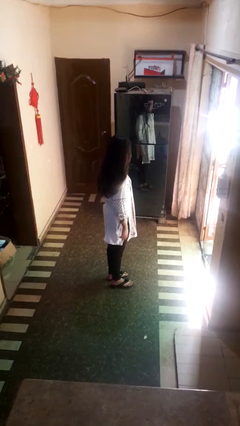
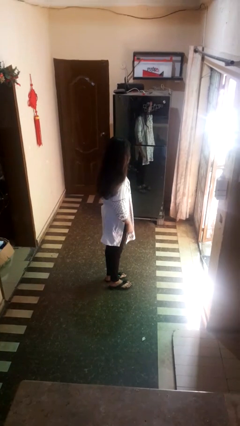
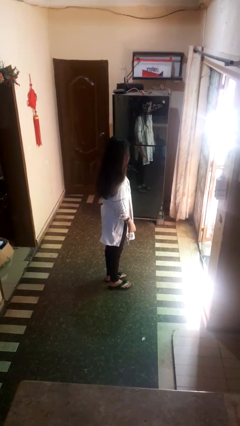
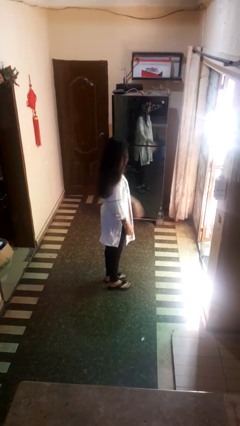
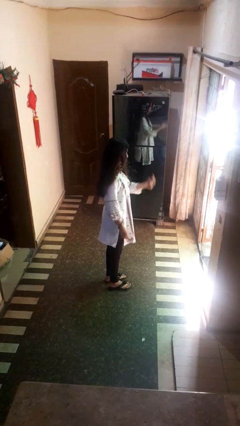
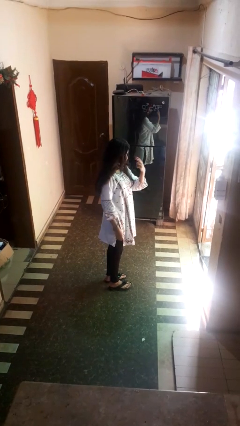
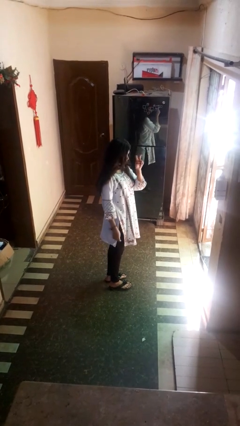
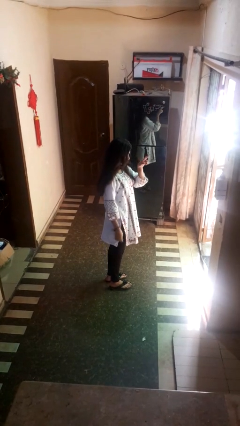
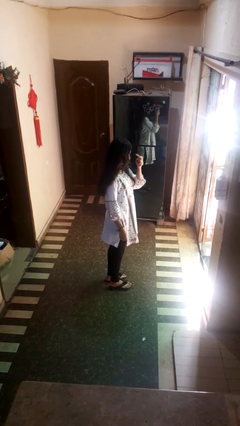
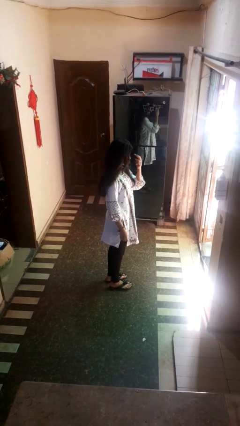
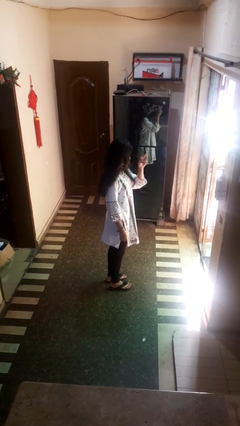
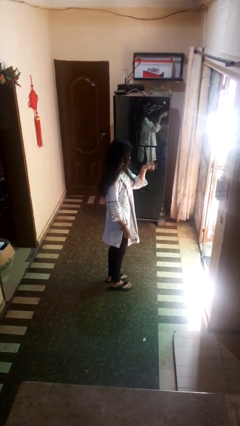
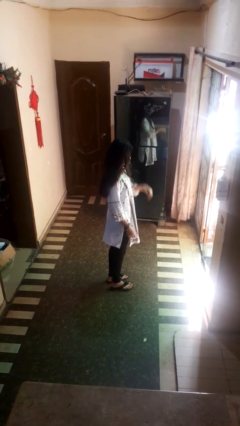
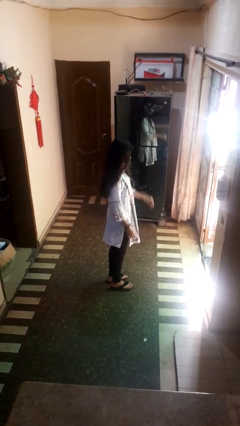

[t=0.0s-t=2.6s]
person gestures watch closely

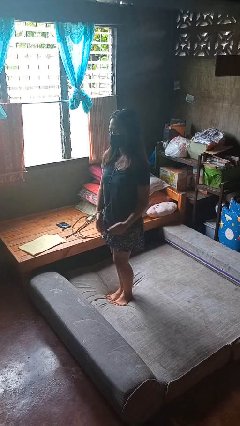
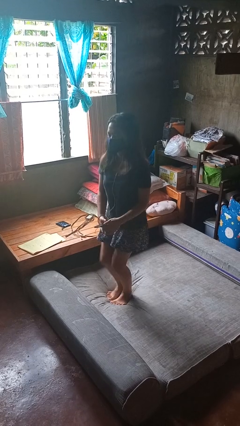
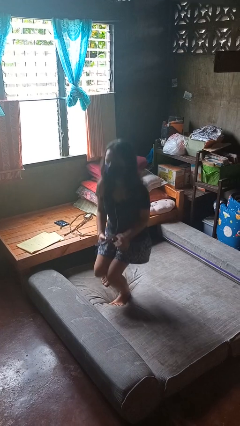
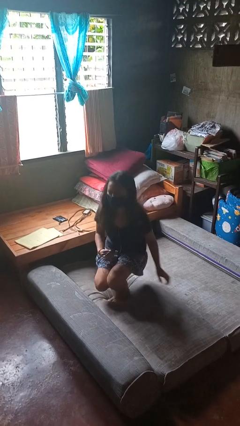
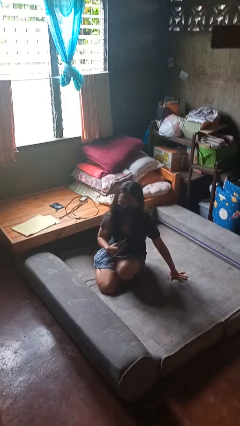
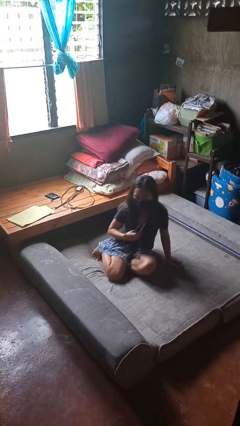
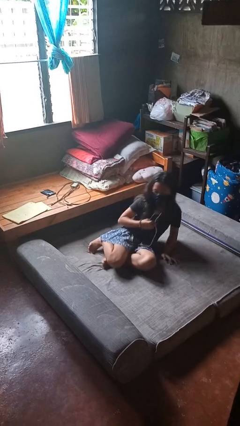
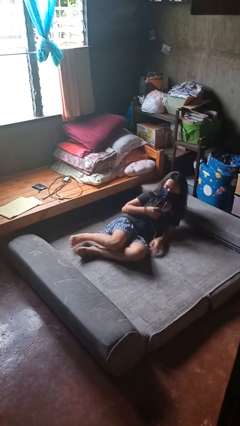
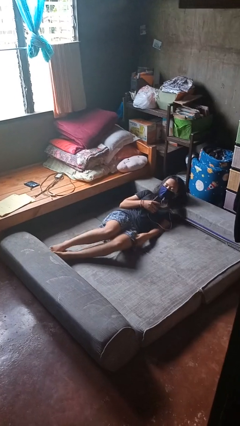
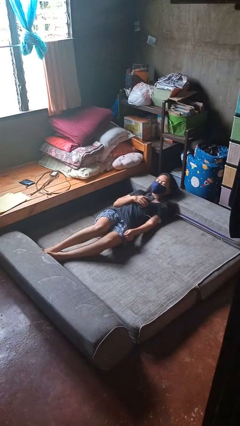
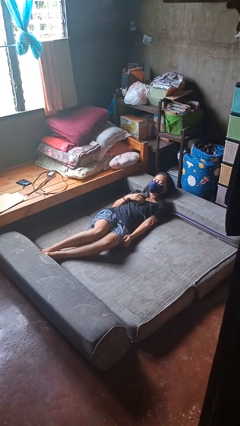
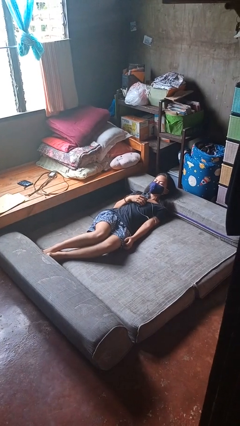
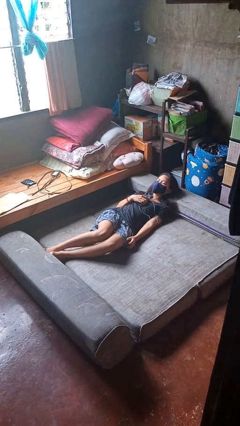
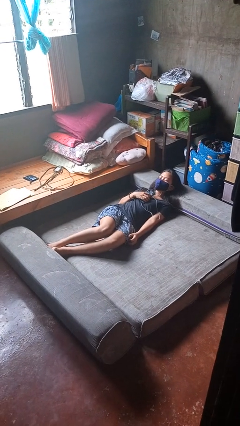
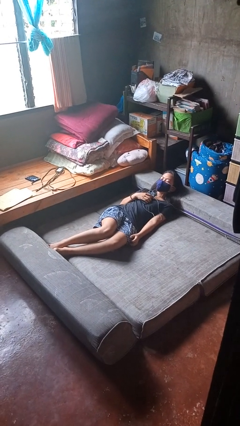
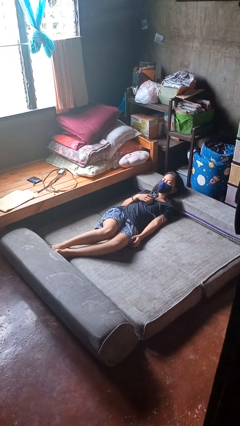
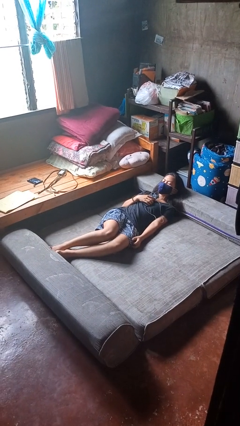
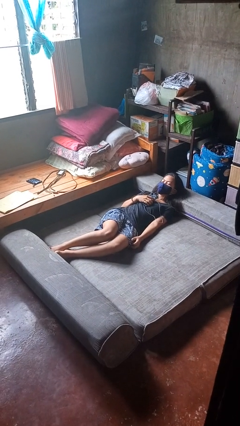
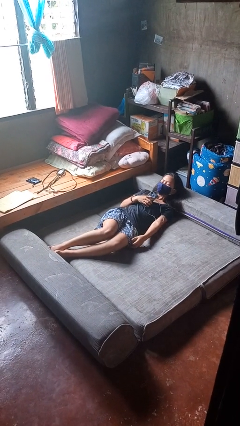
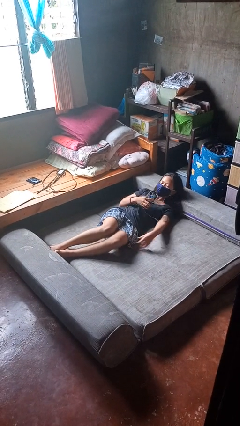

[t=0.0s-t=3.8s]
person lies down on bed

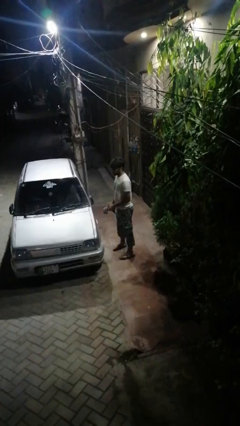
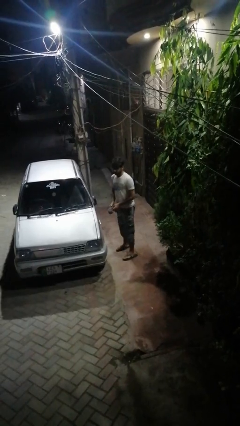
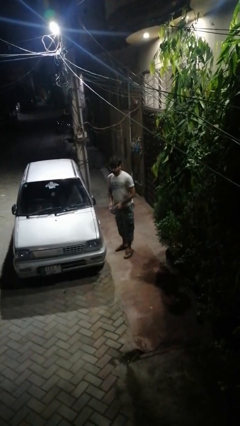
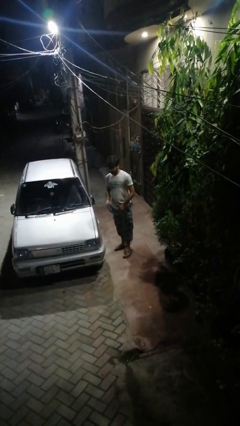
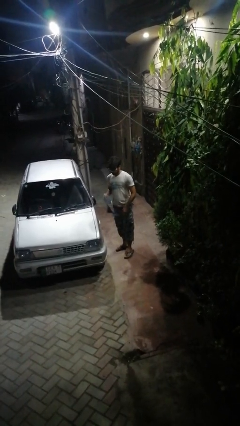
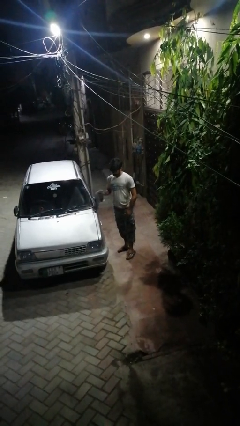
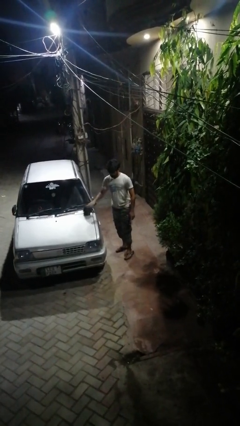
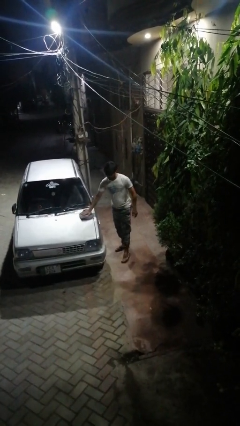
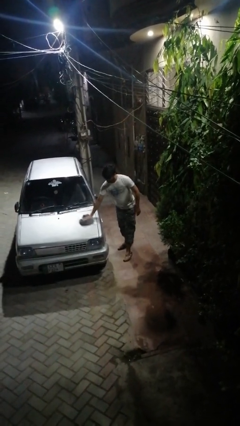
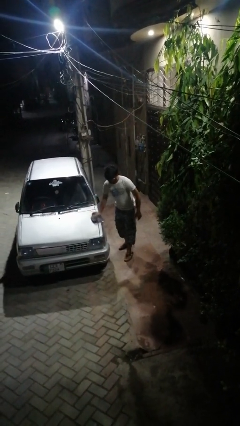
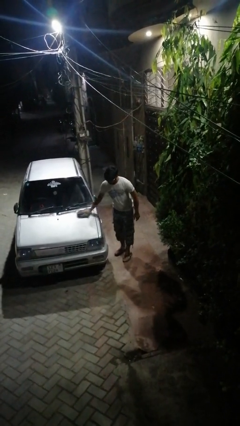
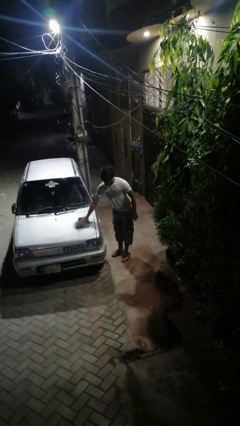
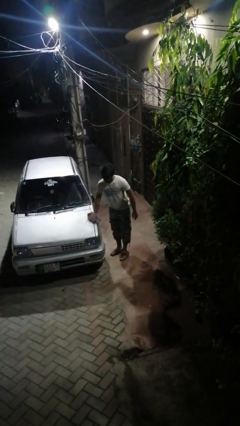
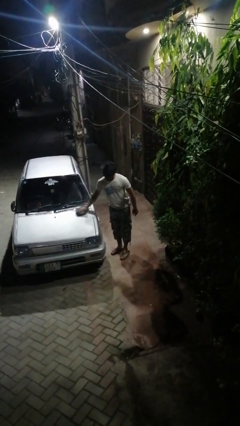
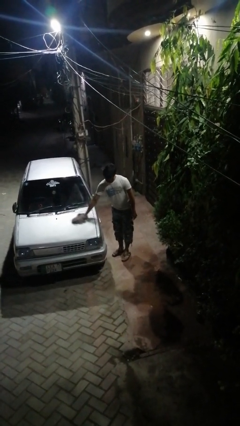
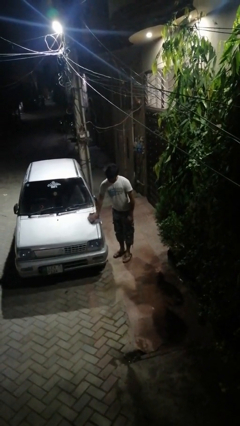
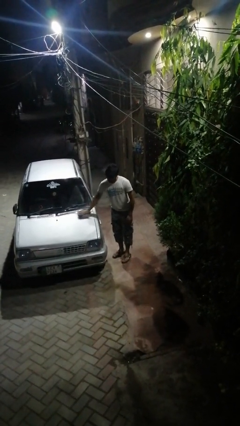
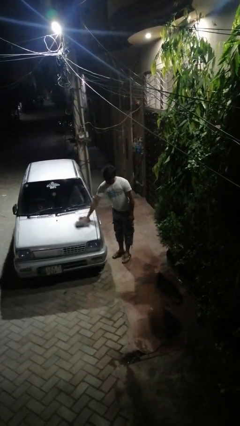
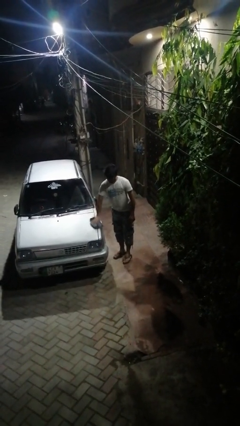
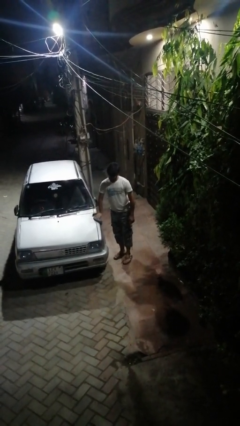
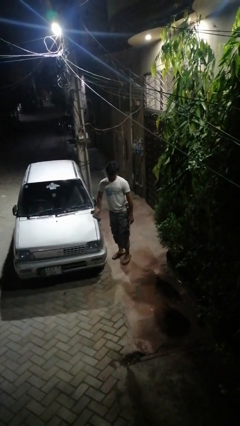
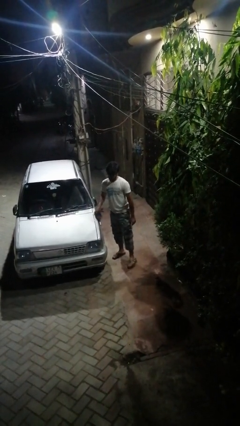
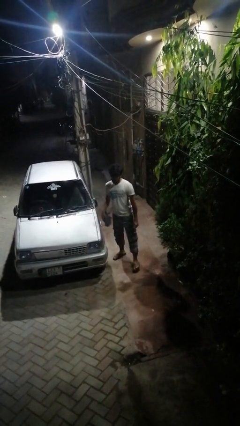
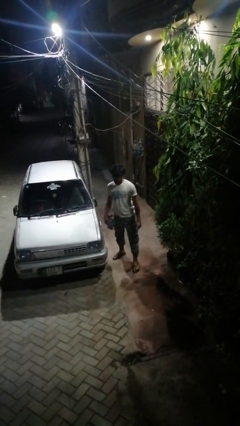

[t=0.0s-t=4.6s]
person polishes car with rag

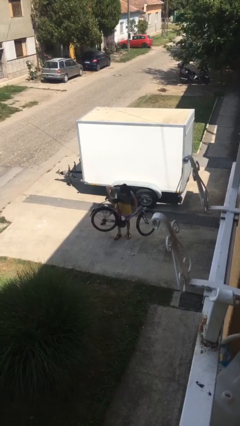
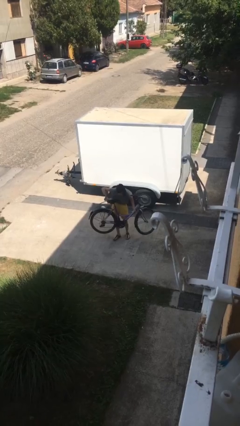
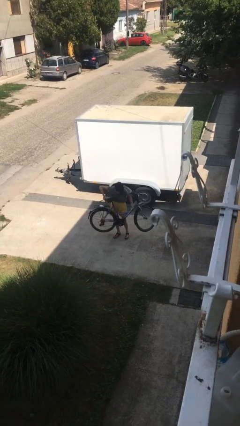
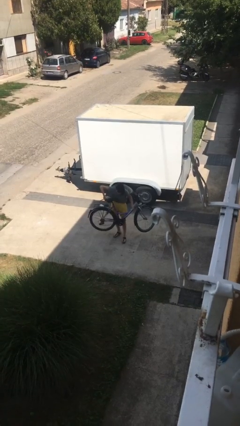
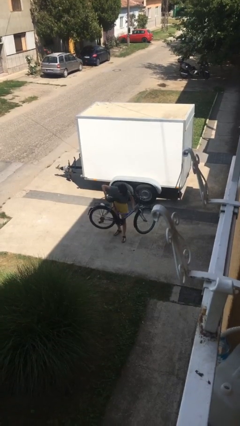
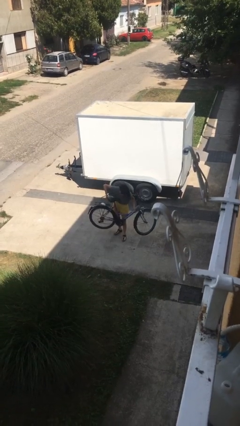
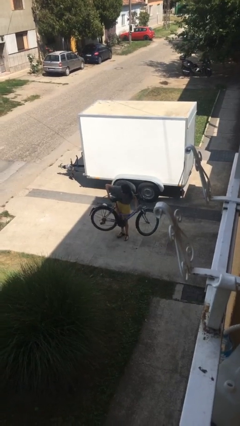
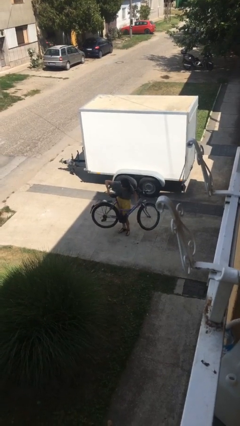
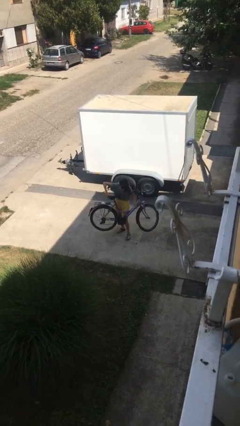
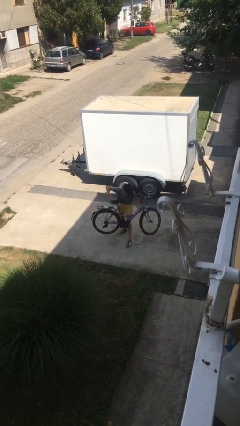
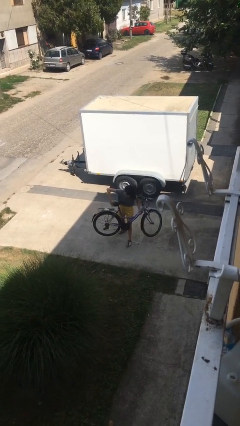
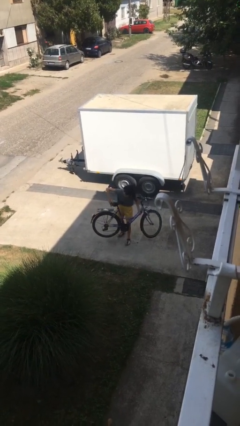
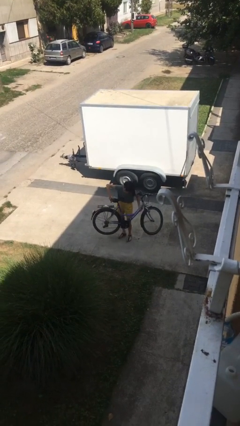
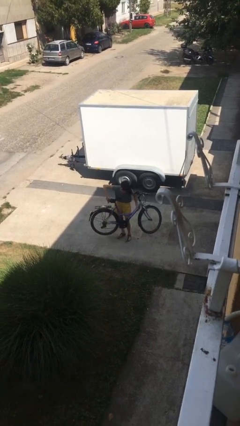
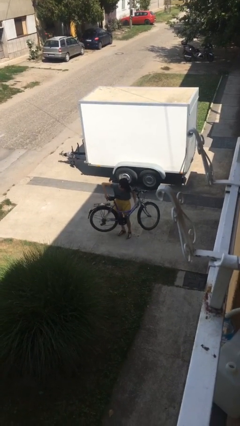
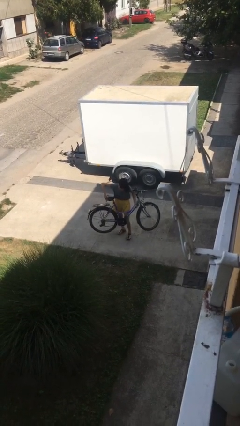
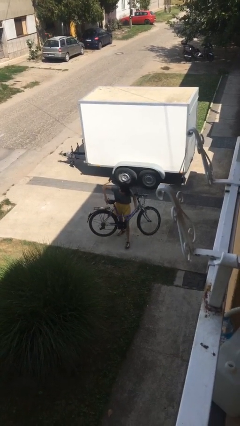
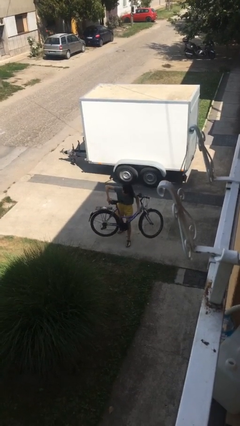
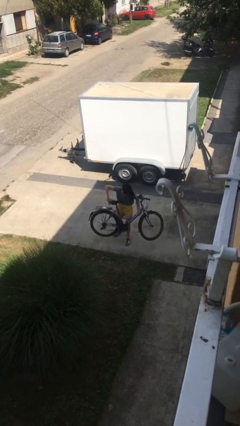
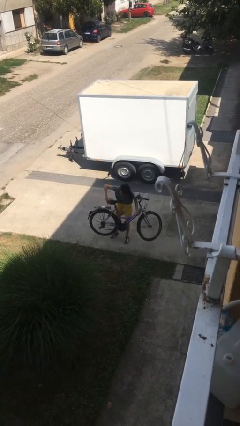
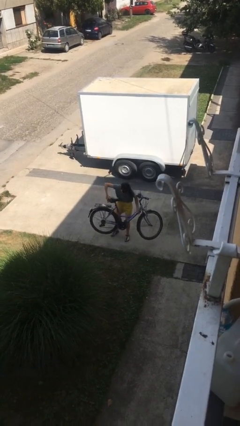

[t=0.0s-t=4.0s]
person carries heavy object

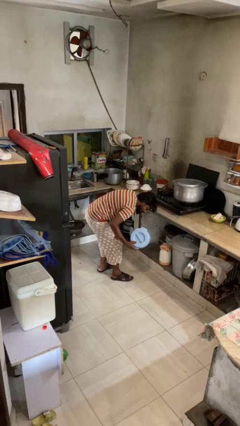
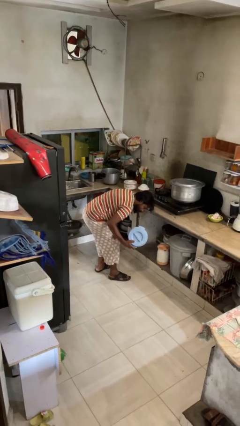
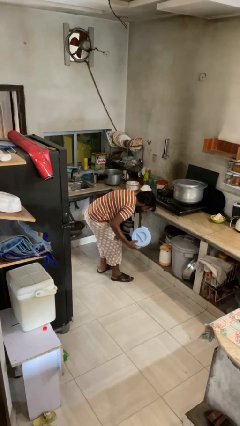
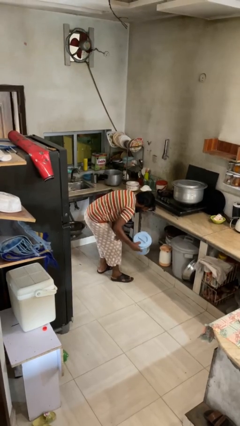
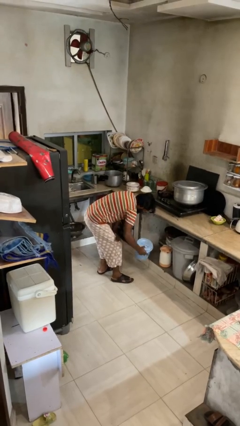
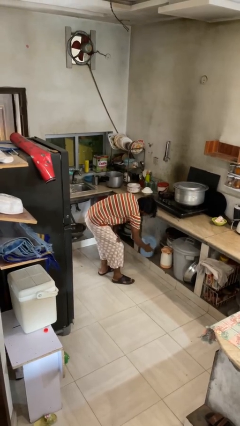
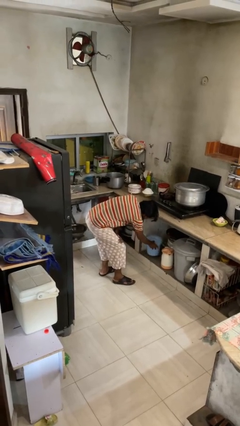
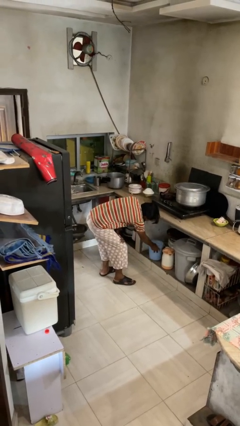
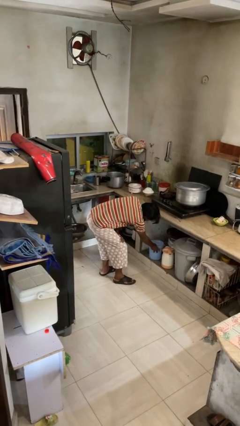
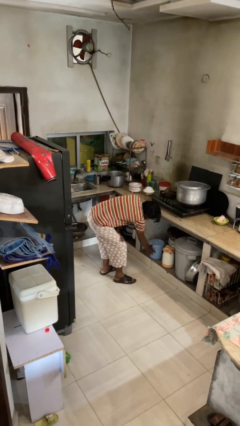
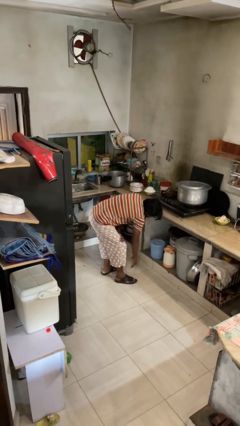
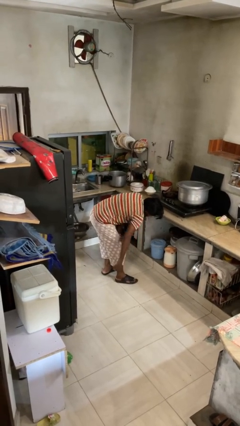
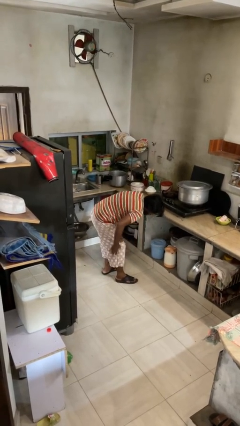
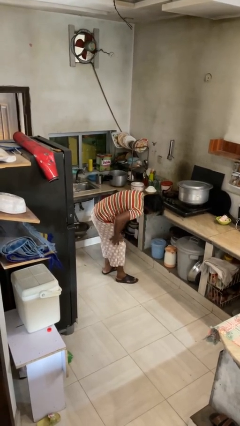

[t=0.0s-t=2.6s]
person puts down object into cabinet
